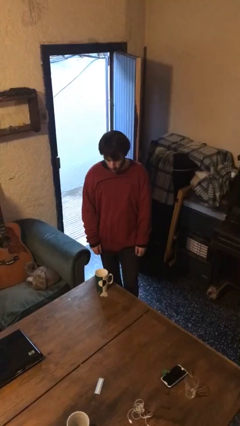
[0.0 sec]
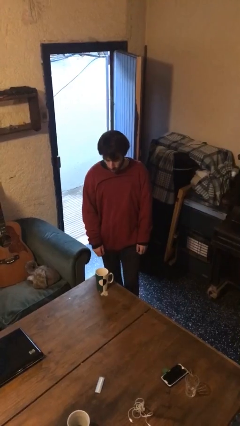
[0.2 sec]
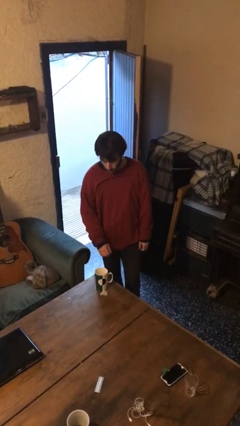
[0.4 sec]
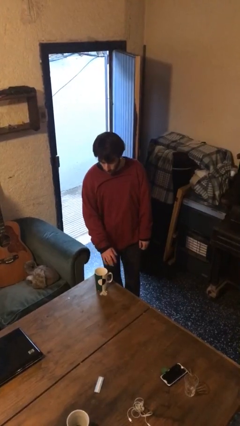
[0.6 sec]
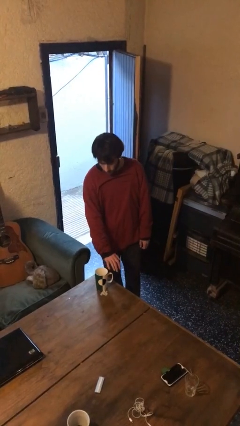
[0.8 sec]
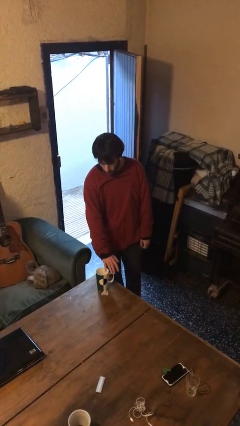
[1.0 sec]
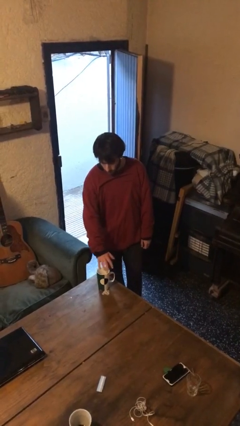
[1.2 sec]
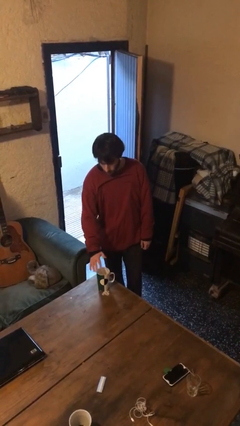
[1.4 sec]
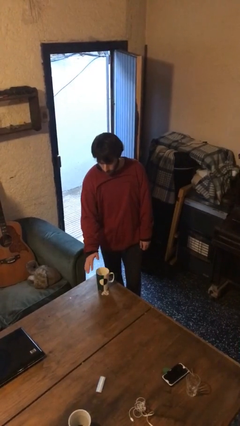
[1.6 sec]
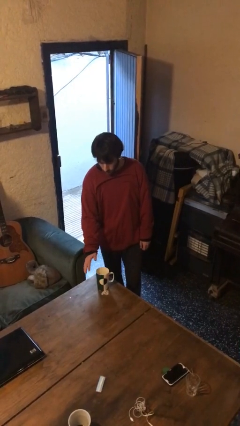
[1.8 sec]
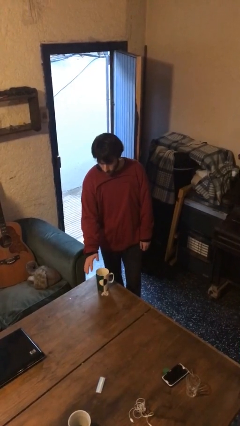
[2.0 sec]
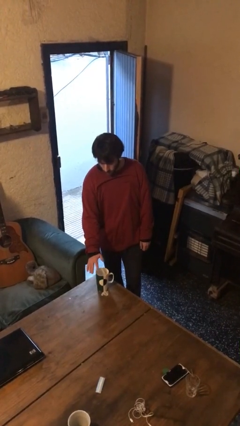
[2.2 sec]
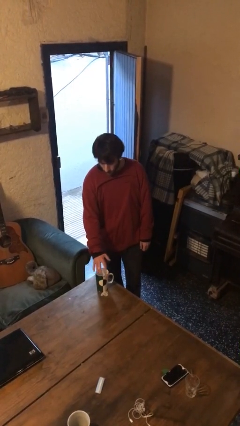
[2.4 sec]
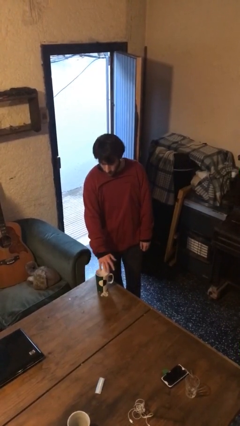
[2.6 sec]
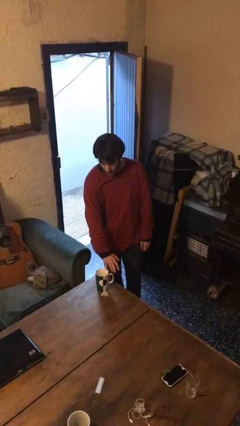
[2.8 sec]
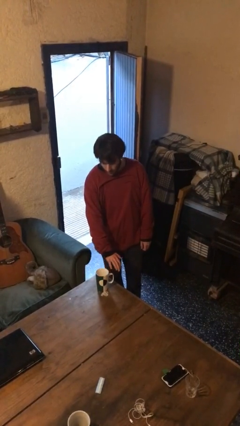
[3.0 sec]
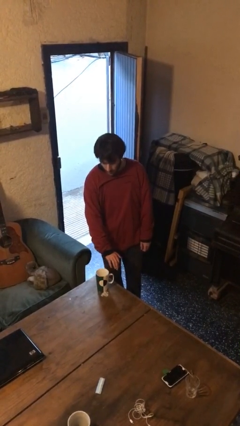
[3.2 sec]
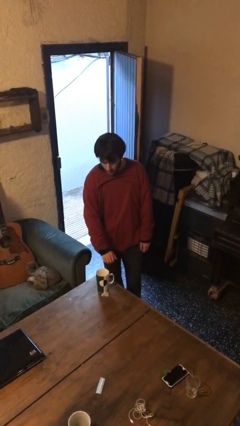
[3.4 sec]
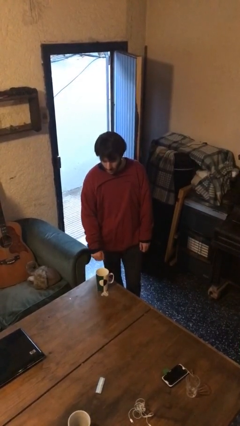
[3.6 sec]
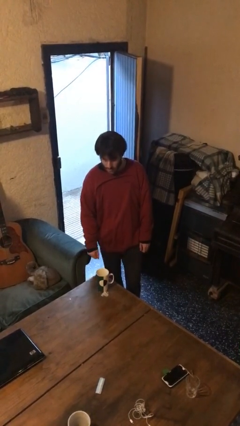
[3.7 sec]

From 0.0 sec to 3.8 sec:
person waves hand over object

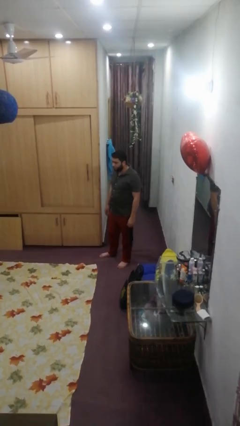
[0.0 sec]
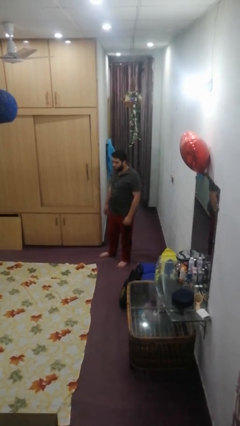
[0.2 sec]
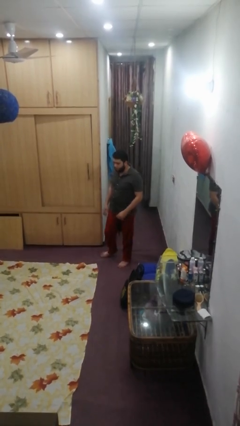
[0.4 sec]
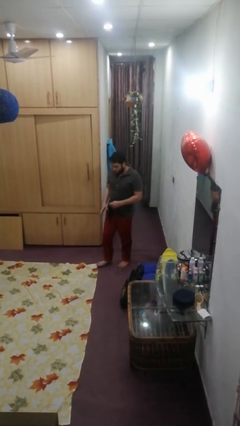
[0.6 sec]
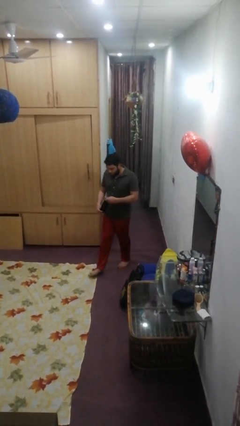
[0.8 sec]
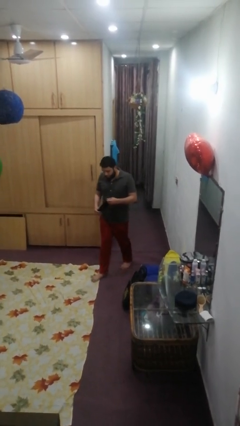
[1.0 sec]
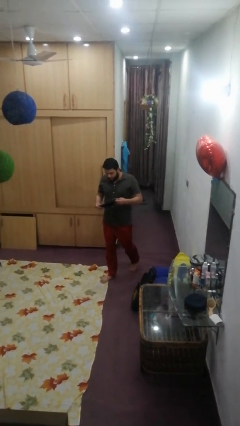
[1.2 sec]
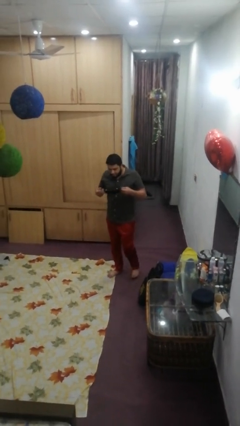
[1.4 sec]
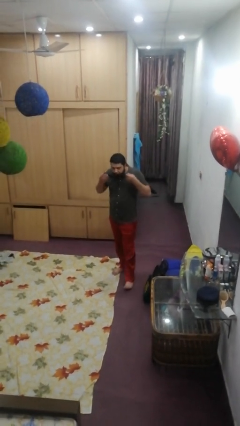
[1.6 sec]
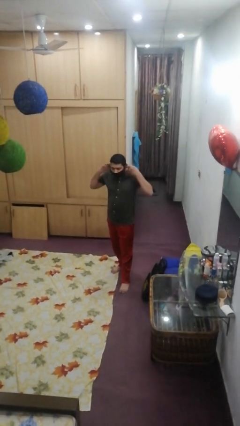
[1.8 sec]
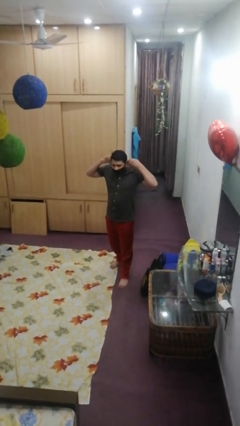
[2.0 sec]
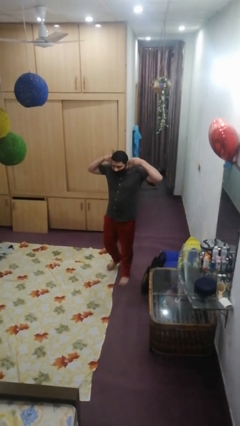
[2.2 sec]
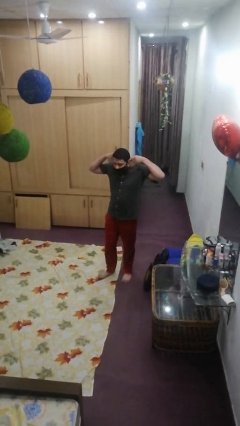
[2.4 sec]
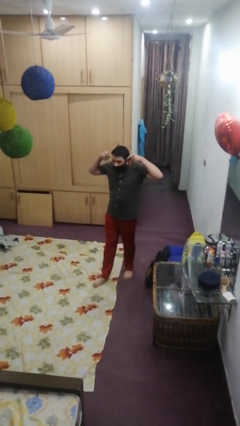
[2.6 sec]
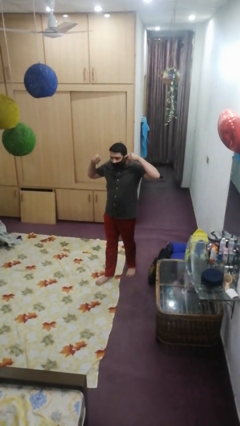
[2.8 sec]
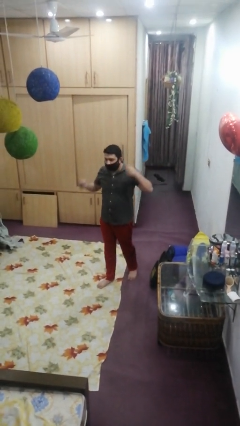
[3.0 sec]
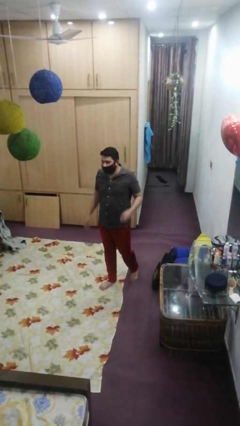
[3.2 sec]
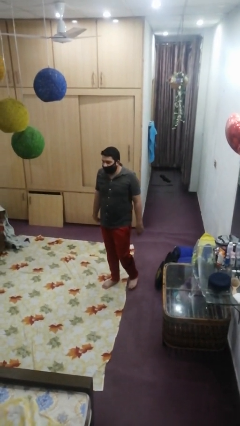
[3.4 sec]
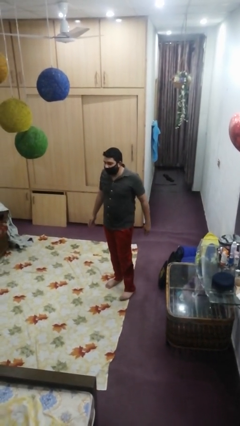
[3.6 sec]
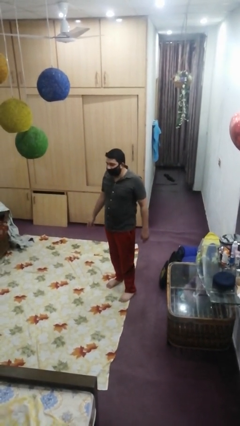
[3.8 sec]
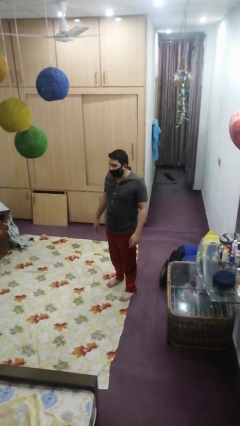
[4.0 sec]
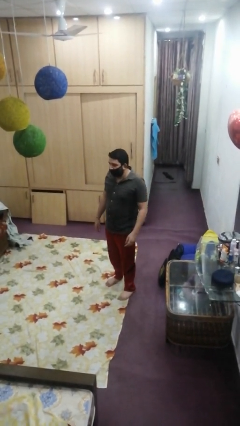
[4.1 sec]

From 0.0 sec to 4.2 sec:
person puts on facemask

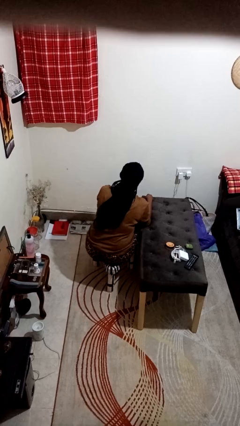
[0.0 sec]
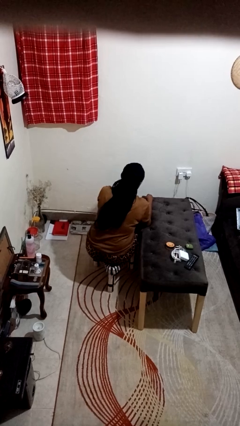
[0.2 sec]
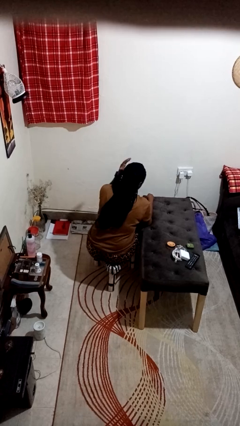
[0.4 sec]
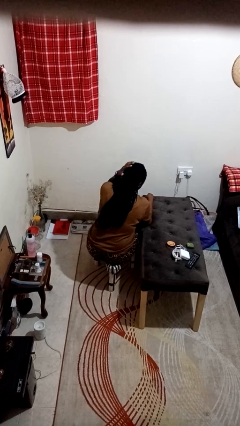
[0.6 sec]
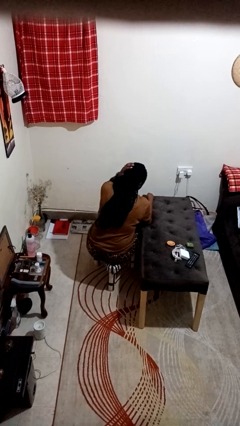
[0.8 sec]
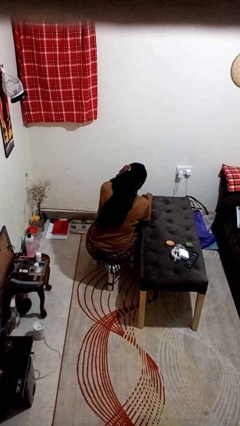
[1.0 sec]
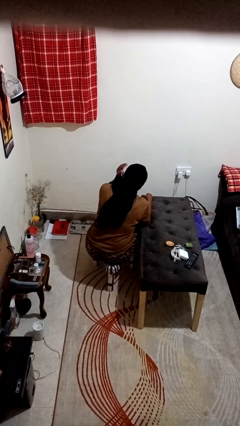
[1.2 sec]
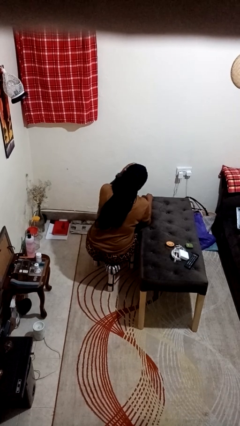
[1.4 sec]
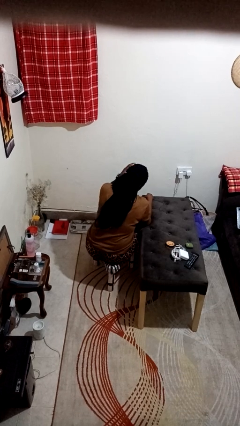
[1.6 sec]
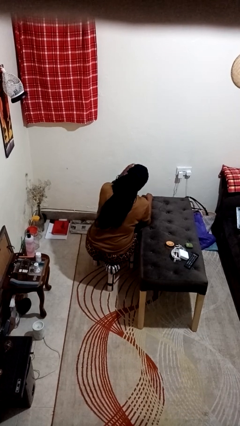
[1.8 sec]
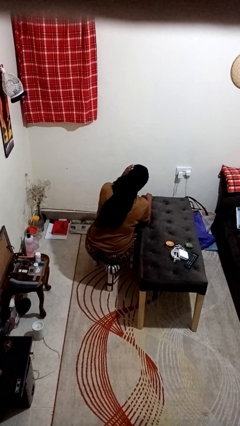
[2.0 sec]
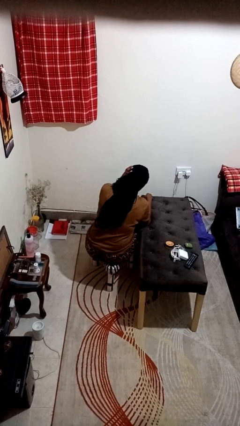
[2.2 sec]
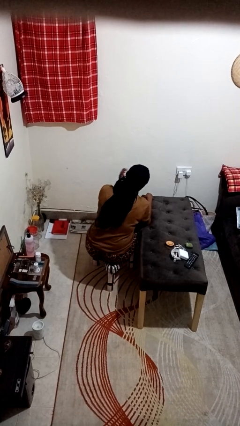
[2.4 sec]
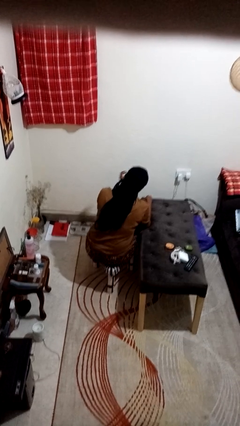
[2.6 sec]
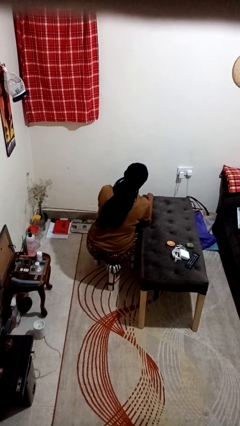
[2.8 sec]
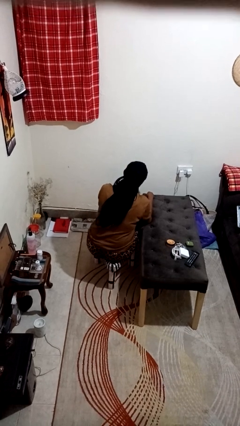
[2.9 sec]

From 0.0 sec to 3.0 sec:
person strokes hair

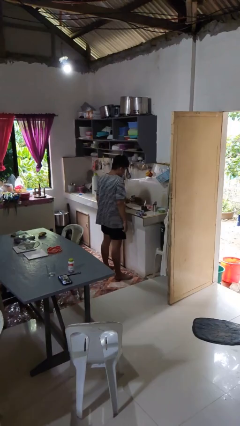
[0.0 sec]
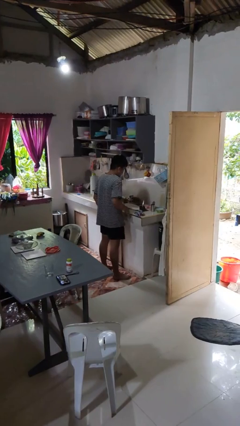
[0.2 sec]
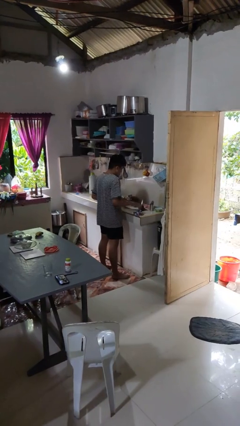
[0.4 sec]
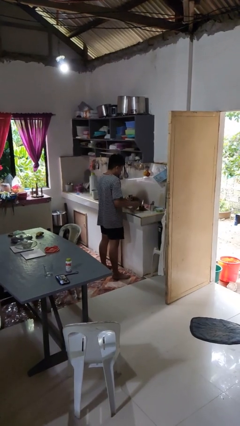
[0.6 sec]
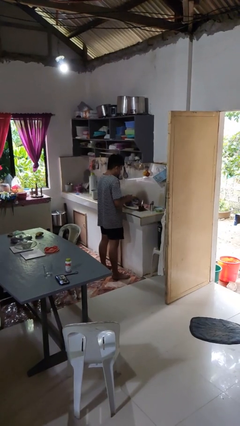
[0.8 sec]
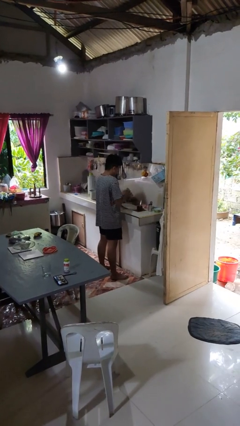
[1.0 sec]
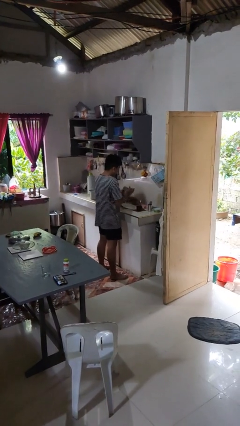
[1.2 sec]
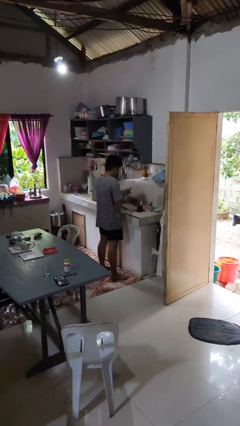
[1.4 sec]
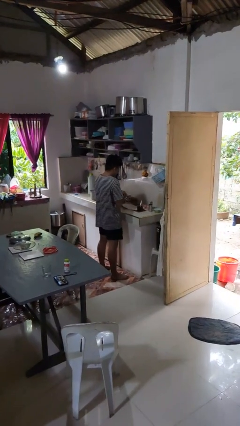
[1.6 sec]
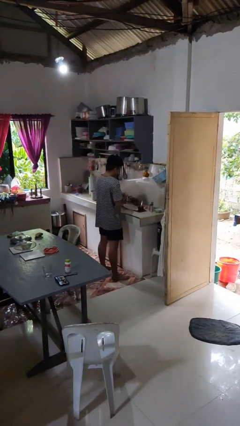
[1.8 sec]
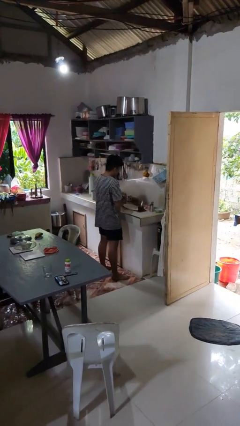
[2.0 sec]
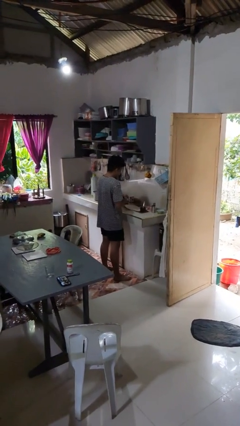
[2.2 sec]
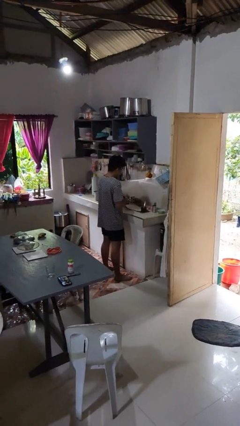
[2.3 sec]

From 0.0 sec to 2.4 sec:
person dries hands with towel

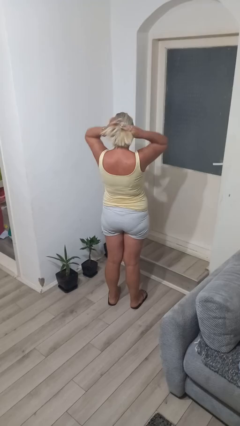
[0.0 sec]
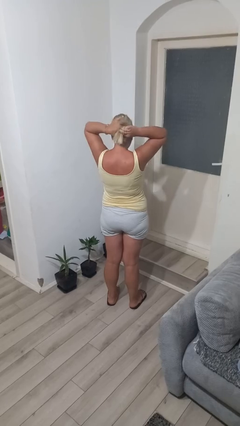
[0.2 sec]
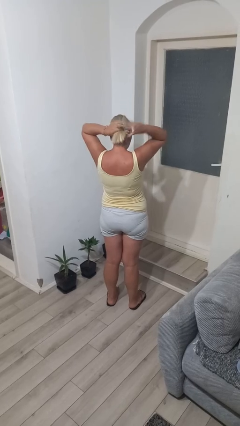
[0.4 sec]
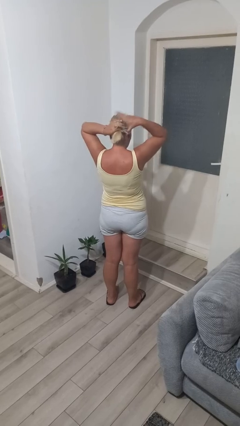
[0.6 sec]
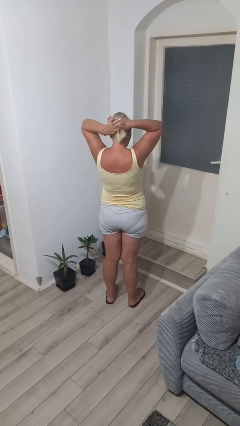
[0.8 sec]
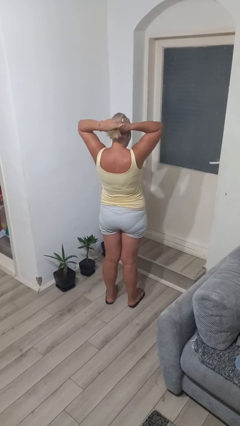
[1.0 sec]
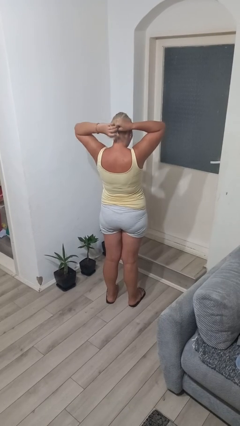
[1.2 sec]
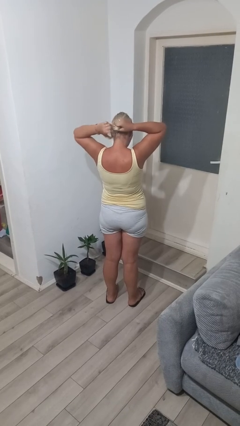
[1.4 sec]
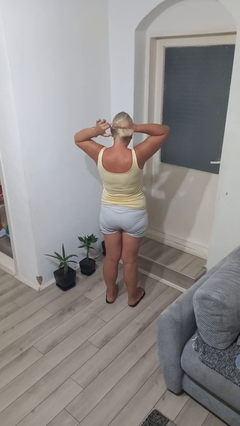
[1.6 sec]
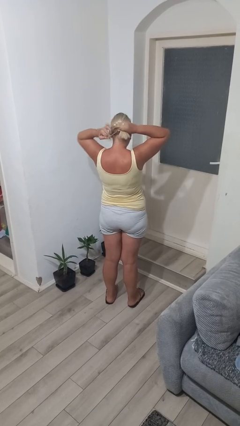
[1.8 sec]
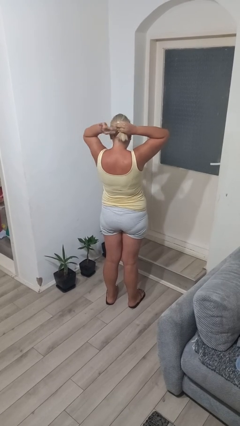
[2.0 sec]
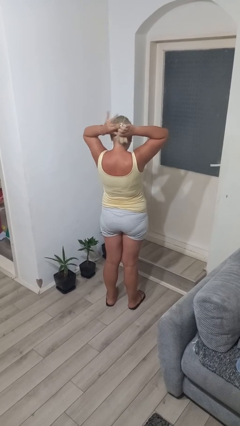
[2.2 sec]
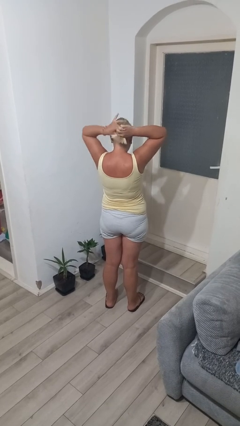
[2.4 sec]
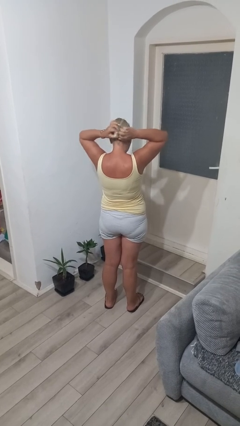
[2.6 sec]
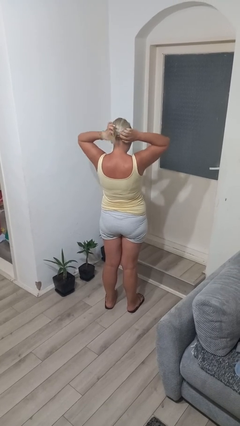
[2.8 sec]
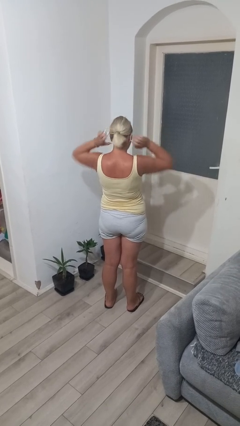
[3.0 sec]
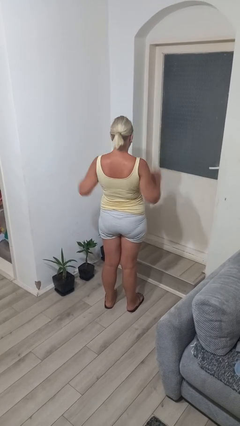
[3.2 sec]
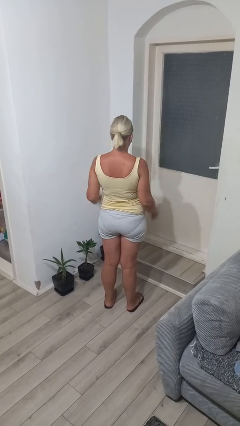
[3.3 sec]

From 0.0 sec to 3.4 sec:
person puts hair in ponytail

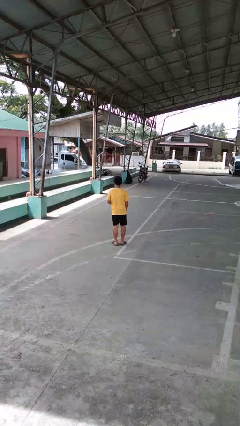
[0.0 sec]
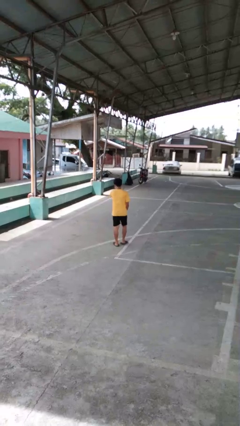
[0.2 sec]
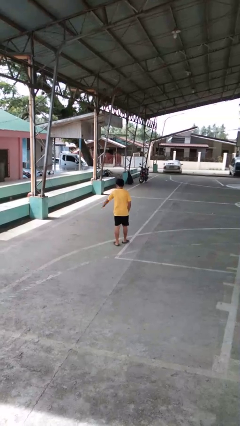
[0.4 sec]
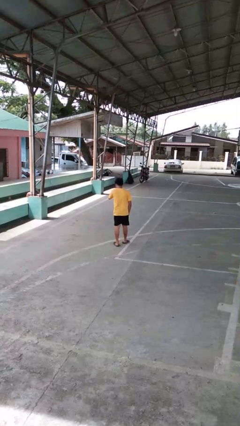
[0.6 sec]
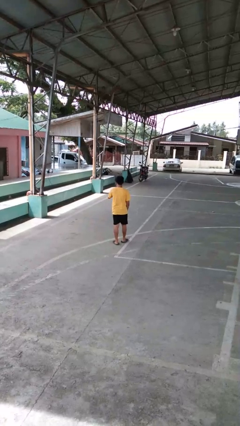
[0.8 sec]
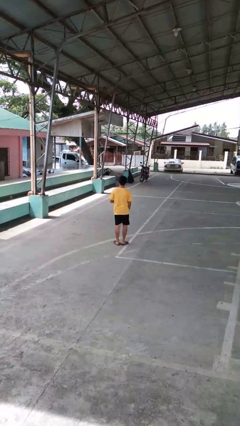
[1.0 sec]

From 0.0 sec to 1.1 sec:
person karate chop
